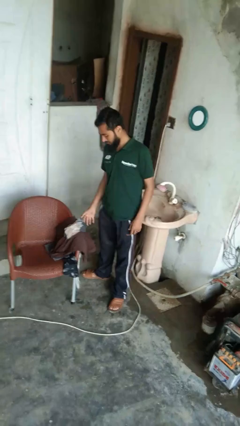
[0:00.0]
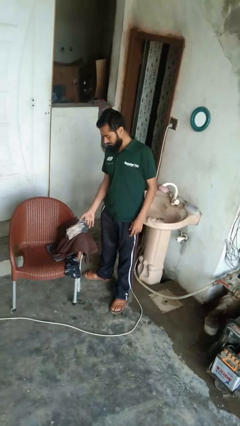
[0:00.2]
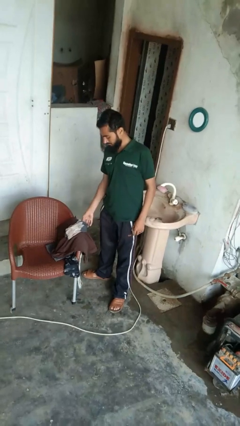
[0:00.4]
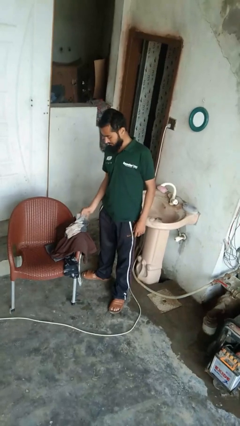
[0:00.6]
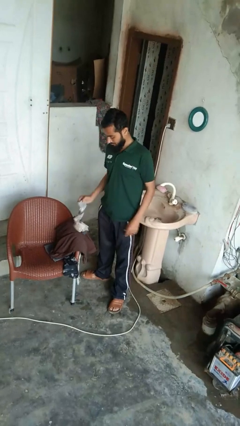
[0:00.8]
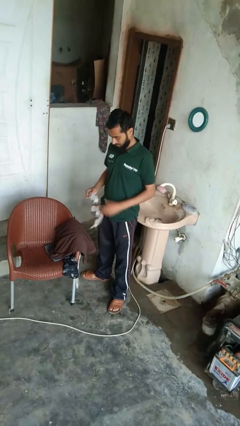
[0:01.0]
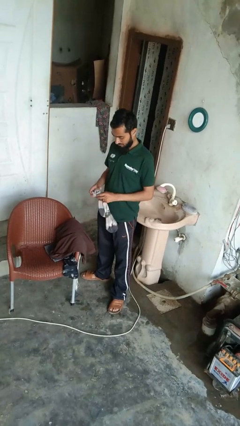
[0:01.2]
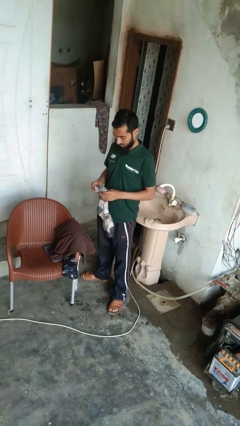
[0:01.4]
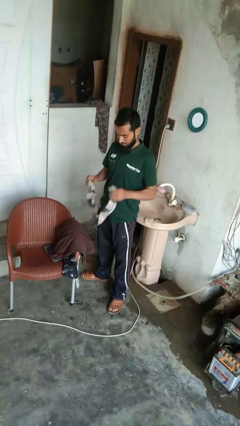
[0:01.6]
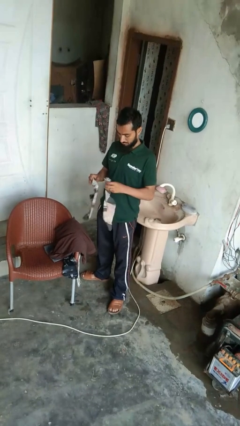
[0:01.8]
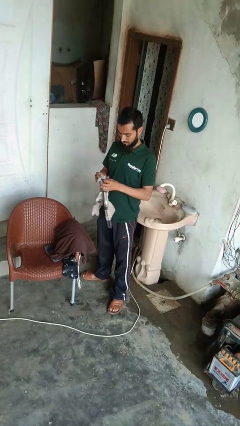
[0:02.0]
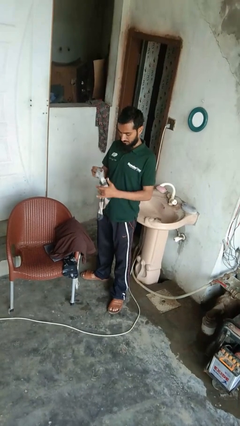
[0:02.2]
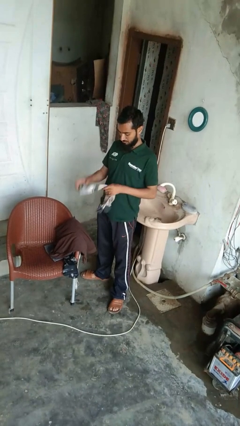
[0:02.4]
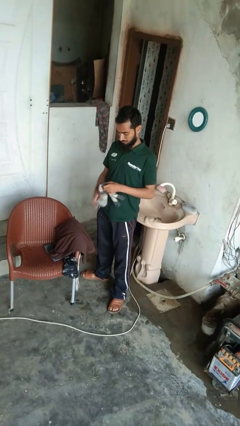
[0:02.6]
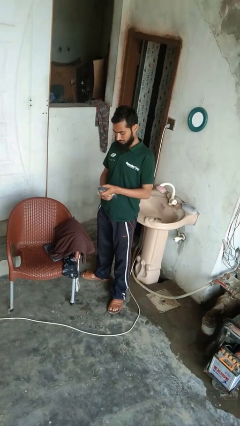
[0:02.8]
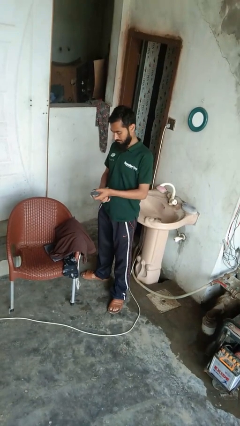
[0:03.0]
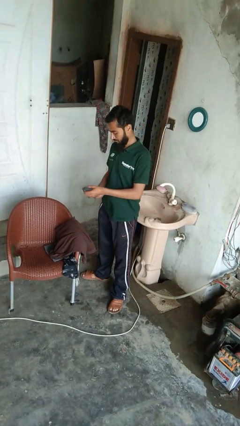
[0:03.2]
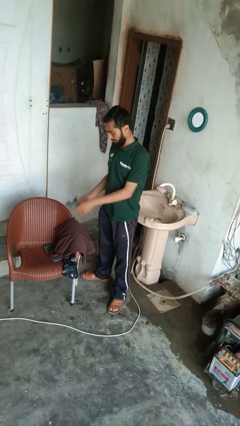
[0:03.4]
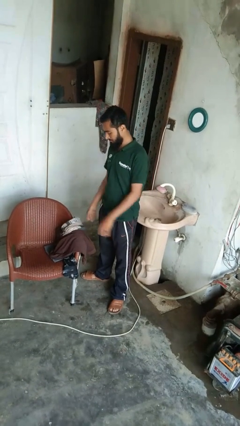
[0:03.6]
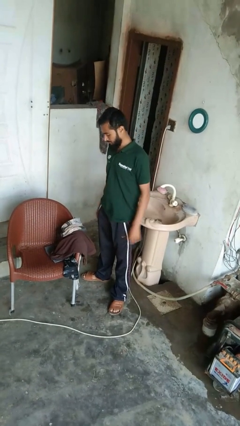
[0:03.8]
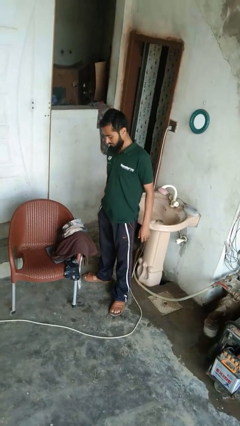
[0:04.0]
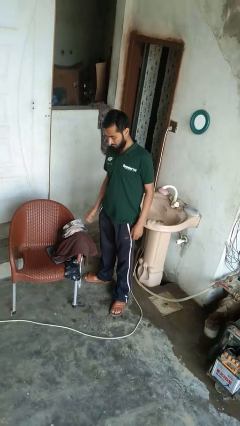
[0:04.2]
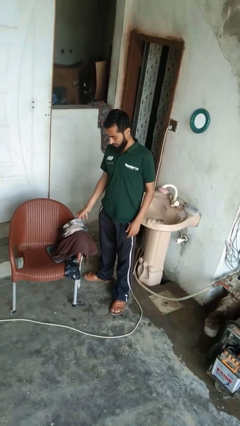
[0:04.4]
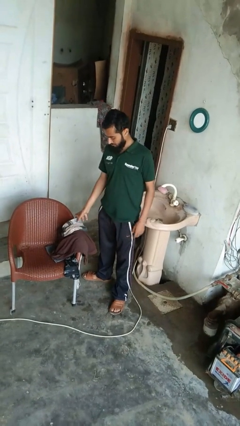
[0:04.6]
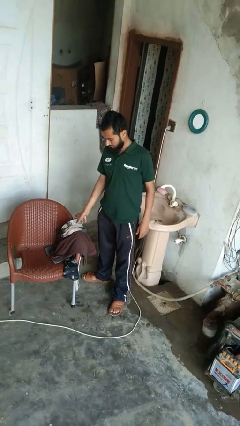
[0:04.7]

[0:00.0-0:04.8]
person folds socks

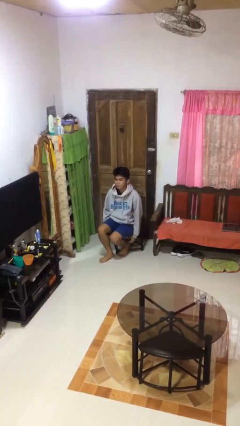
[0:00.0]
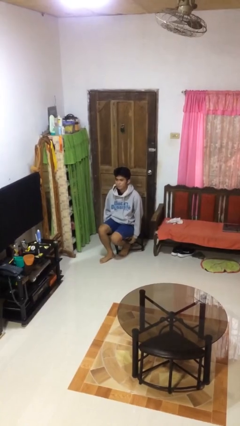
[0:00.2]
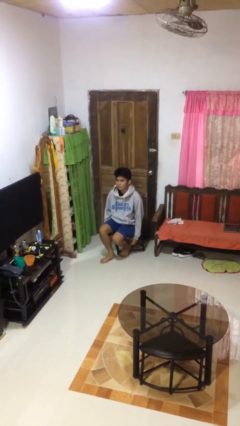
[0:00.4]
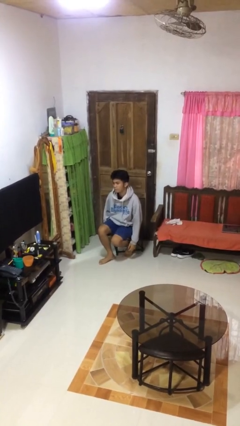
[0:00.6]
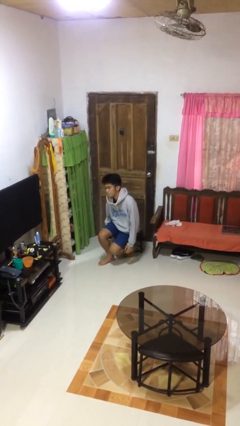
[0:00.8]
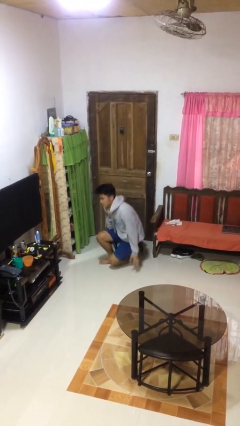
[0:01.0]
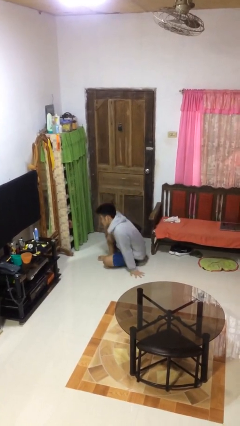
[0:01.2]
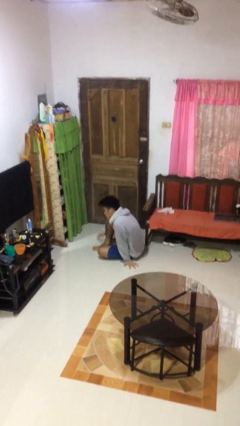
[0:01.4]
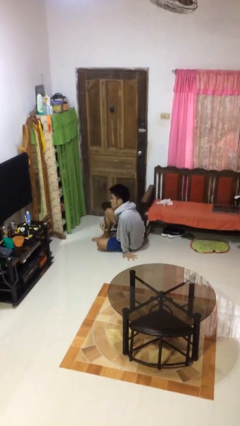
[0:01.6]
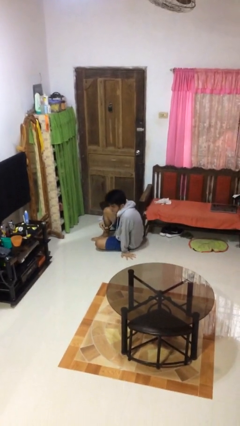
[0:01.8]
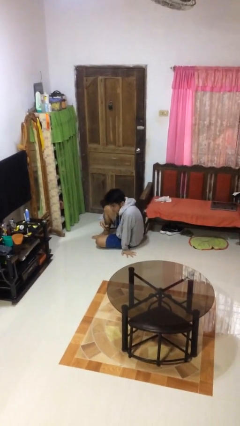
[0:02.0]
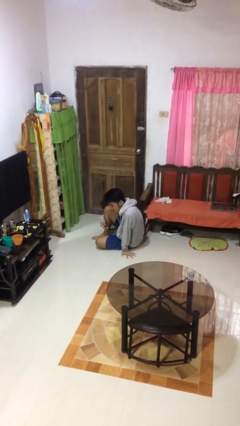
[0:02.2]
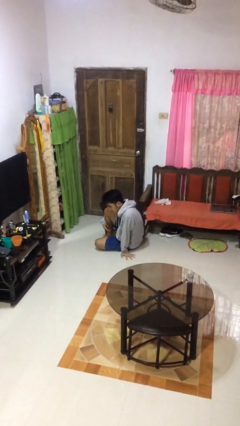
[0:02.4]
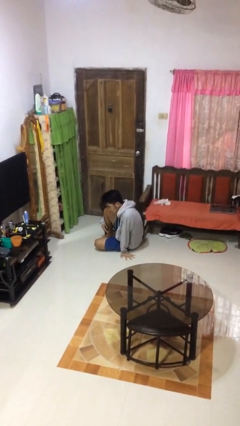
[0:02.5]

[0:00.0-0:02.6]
person falls from chair

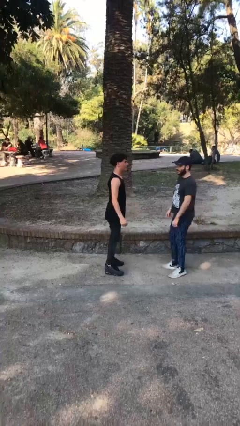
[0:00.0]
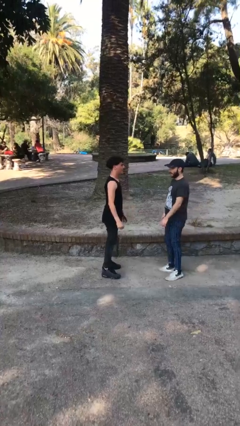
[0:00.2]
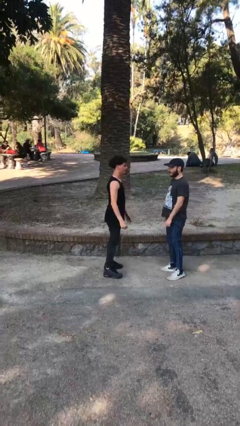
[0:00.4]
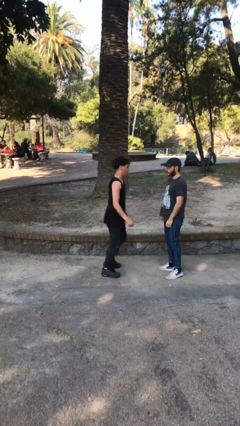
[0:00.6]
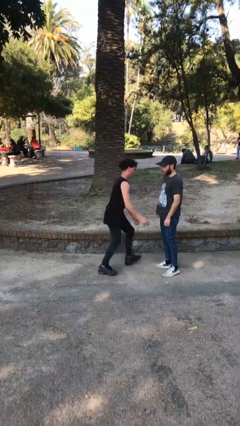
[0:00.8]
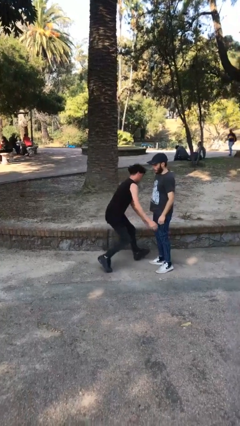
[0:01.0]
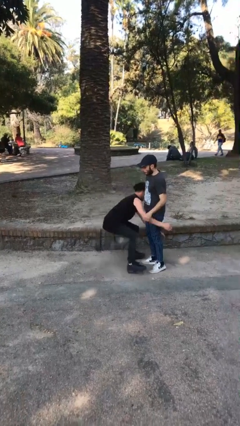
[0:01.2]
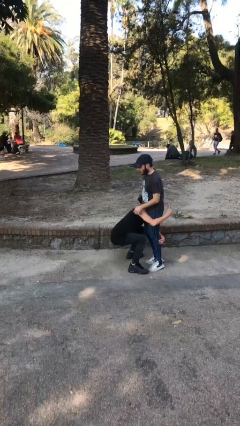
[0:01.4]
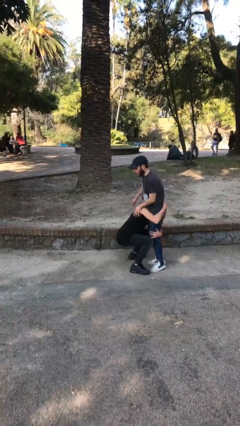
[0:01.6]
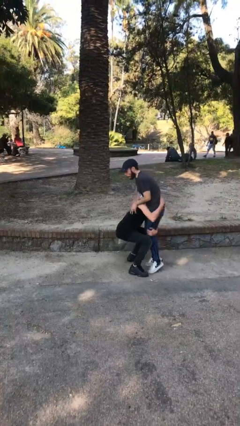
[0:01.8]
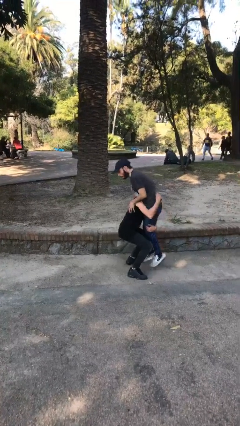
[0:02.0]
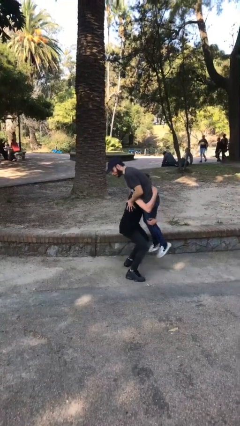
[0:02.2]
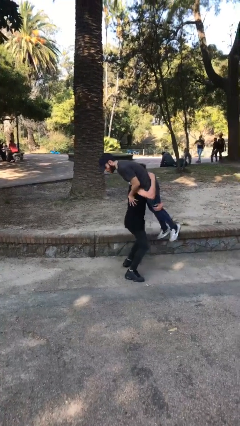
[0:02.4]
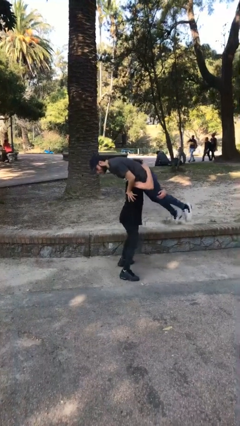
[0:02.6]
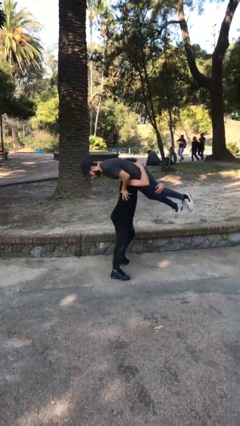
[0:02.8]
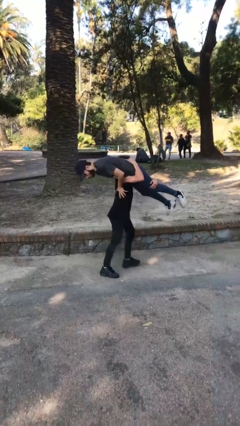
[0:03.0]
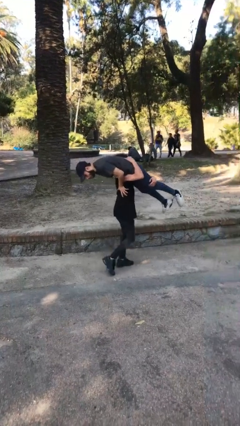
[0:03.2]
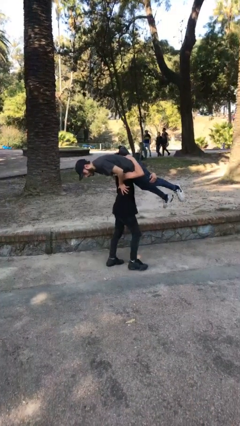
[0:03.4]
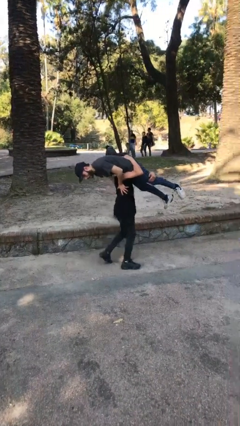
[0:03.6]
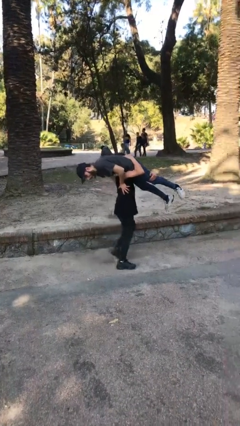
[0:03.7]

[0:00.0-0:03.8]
person carries person over shoulder

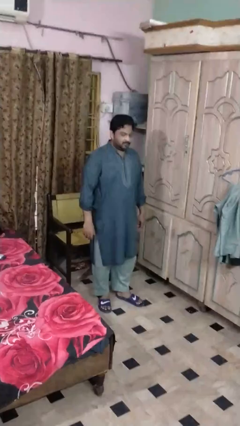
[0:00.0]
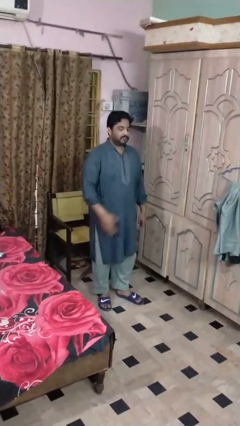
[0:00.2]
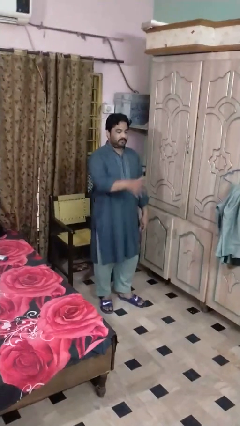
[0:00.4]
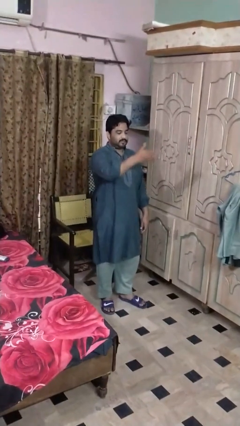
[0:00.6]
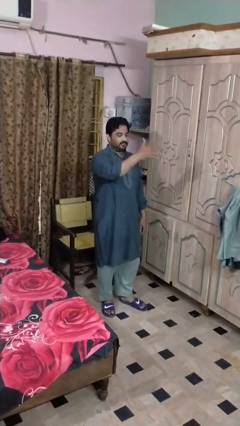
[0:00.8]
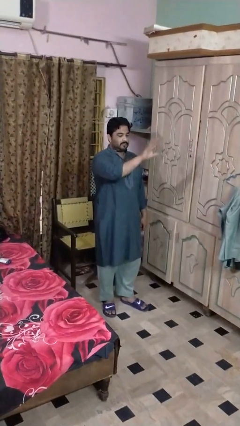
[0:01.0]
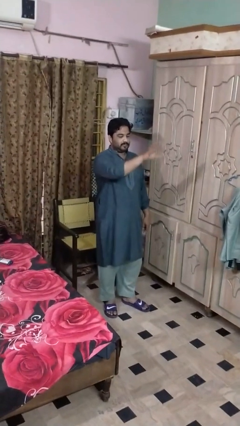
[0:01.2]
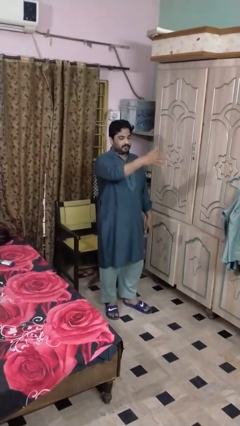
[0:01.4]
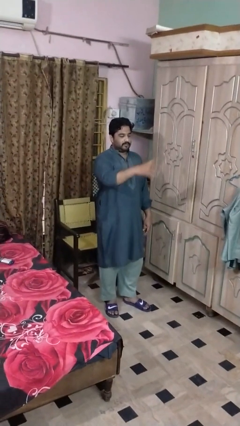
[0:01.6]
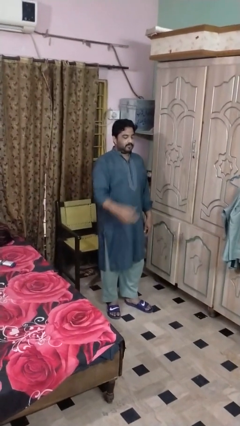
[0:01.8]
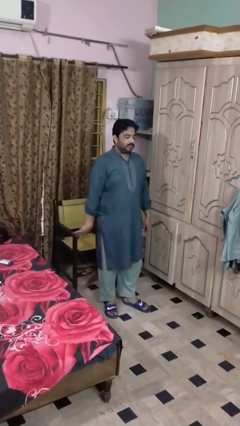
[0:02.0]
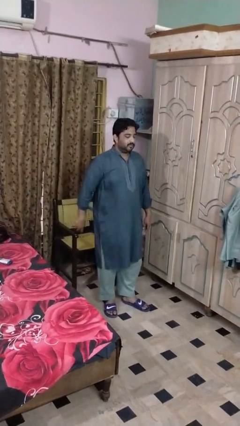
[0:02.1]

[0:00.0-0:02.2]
person shakes head

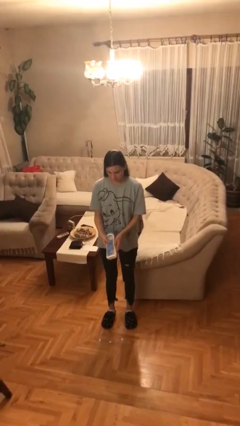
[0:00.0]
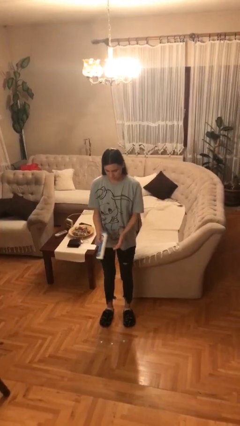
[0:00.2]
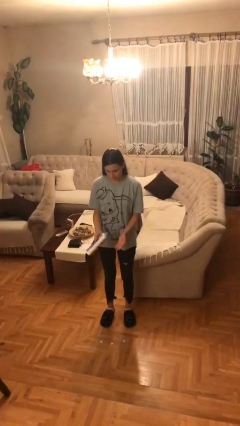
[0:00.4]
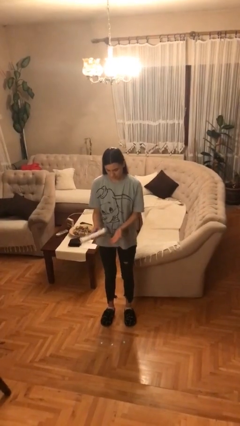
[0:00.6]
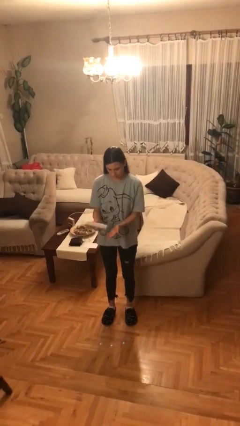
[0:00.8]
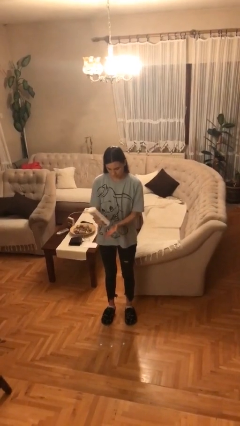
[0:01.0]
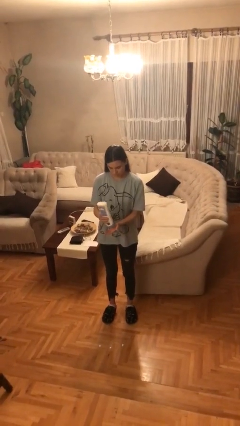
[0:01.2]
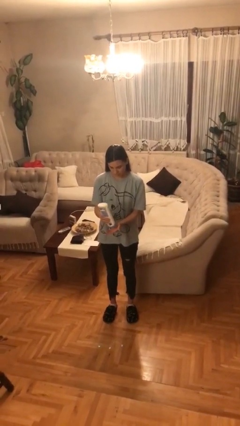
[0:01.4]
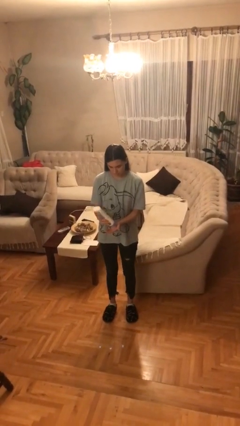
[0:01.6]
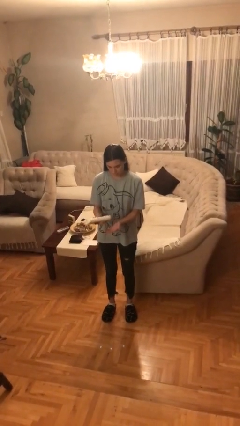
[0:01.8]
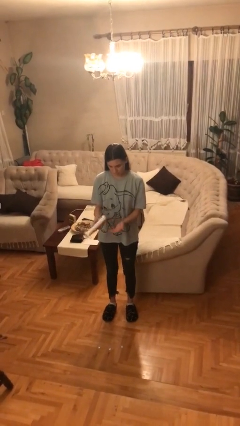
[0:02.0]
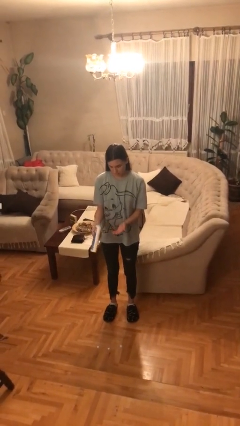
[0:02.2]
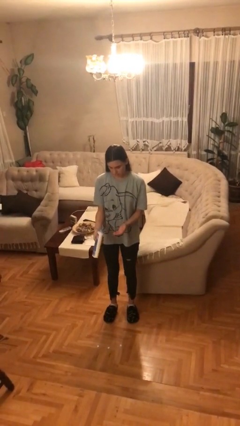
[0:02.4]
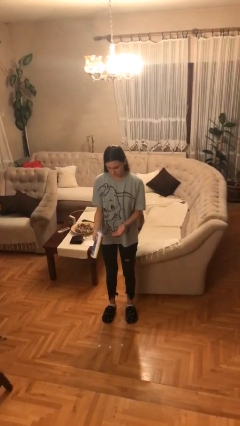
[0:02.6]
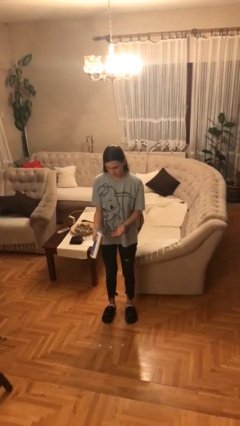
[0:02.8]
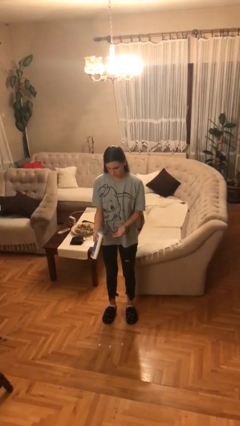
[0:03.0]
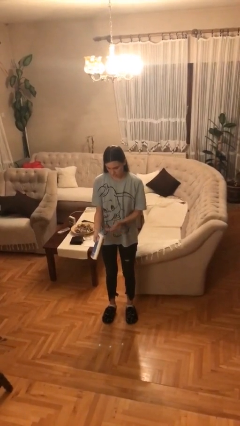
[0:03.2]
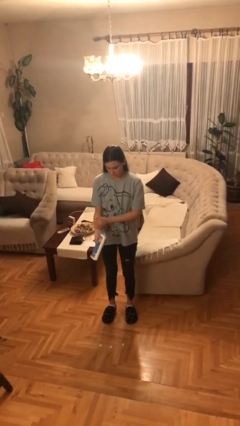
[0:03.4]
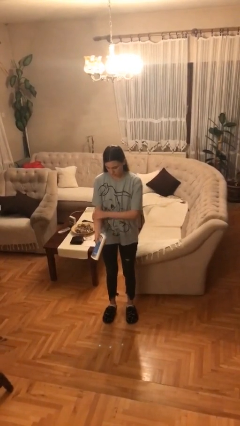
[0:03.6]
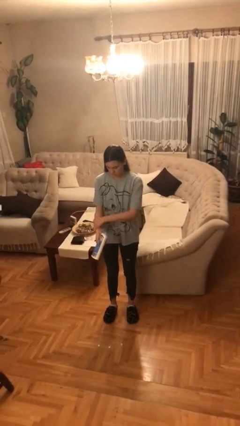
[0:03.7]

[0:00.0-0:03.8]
person applies sunscreen

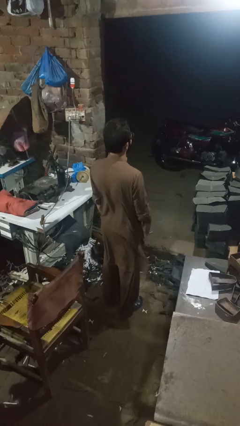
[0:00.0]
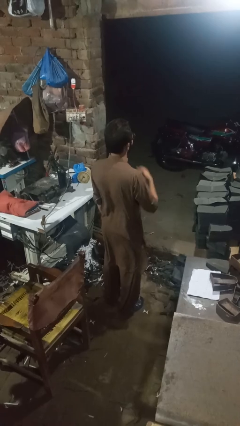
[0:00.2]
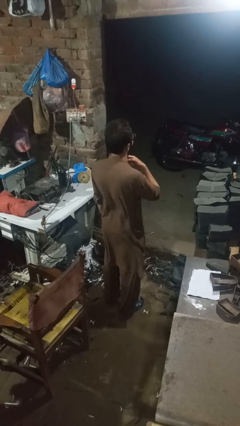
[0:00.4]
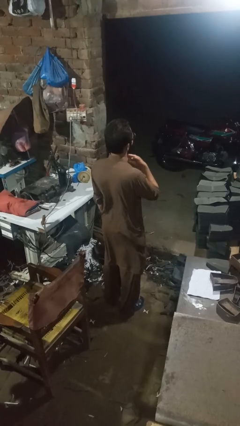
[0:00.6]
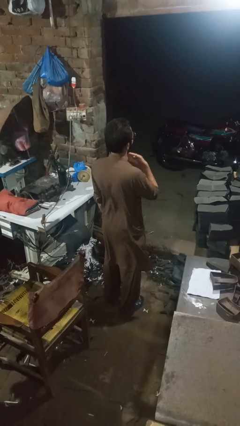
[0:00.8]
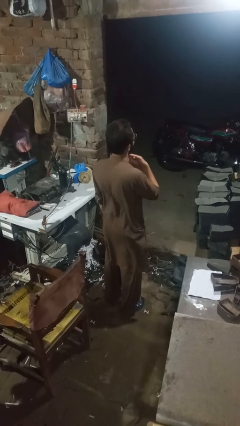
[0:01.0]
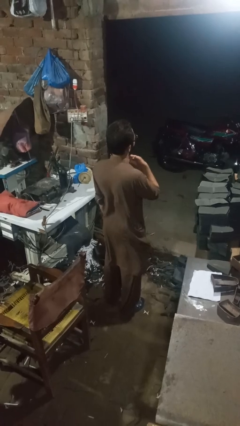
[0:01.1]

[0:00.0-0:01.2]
person rubs neck
